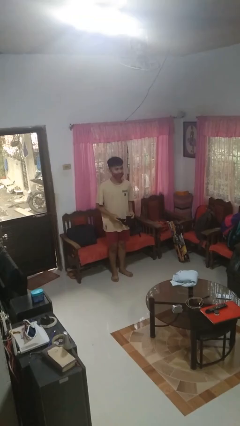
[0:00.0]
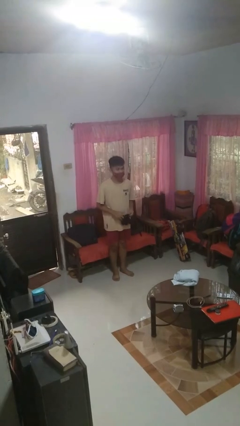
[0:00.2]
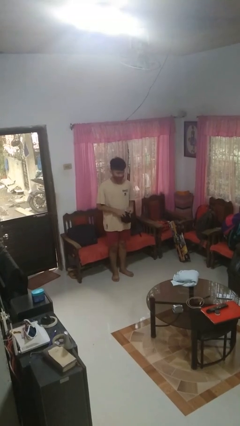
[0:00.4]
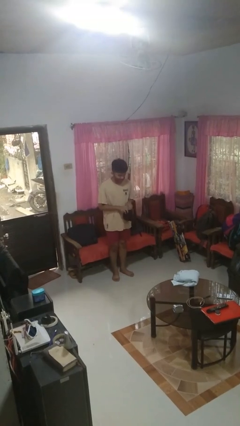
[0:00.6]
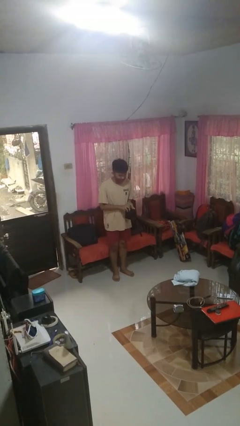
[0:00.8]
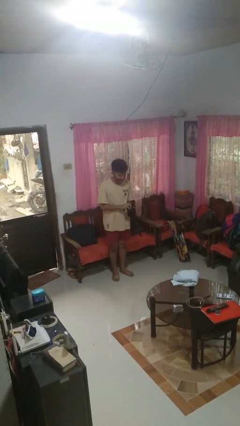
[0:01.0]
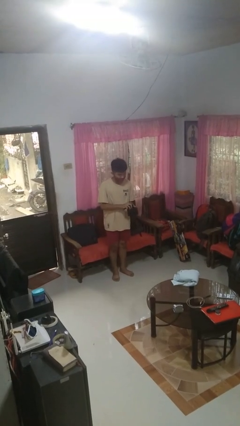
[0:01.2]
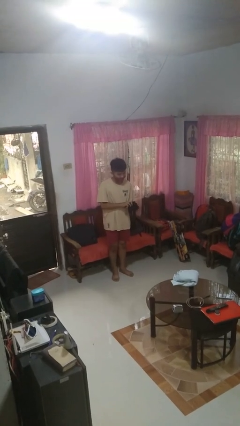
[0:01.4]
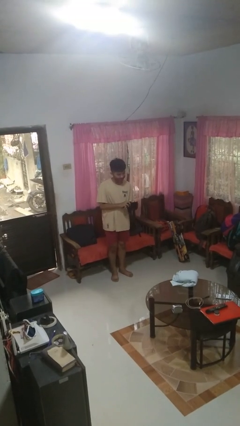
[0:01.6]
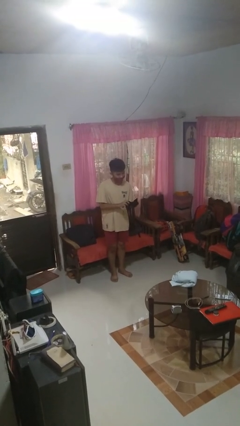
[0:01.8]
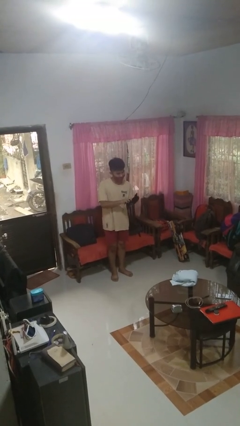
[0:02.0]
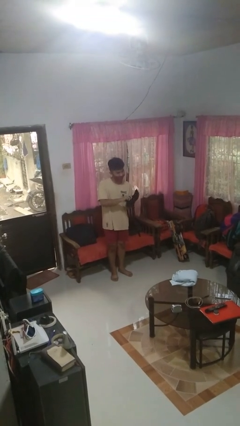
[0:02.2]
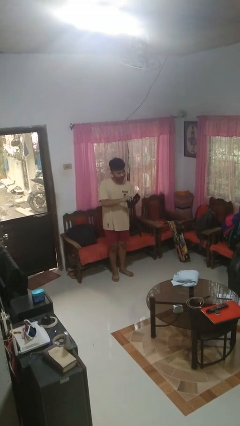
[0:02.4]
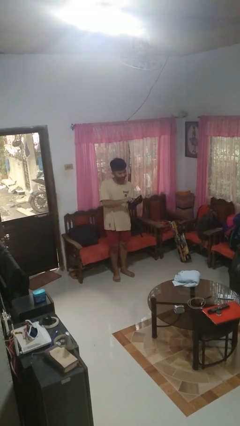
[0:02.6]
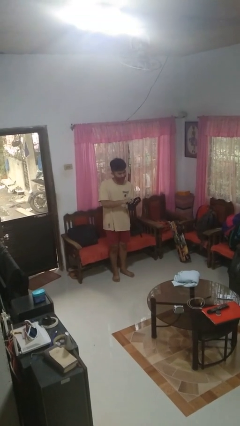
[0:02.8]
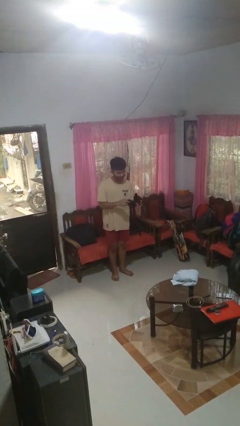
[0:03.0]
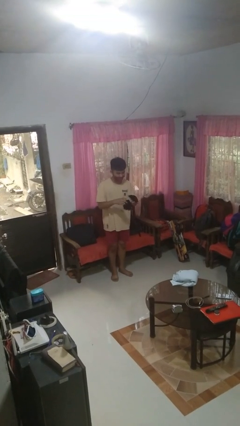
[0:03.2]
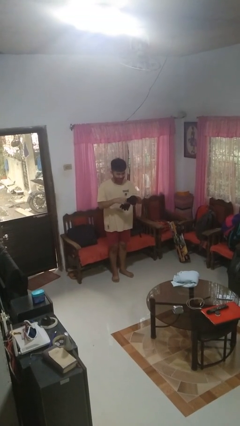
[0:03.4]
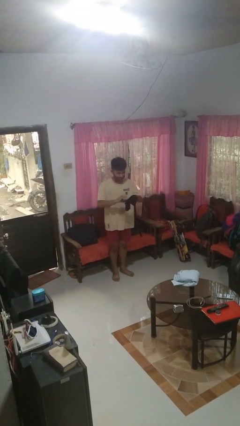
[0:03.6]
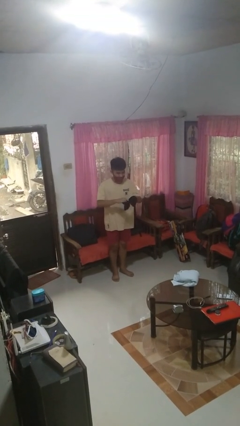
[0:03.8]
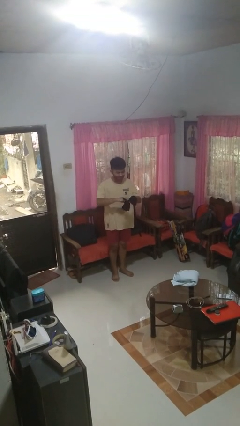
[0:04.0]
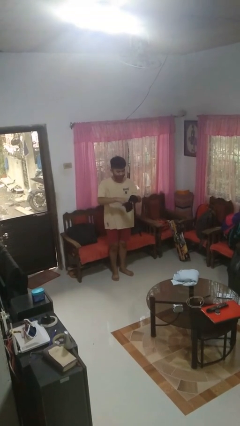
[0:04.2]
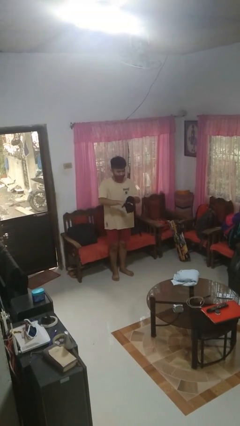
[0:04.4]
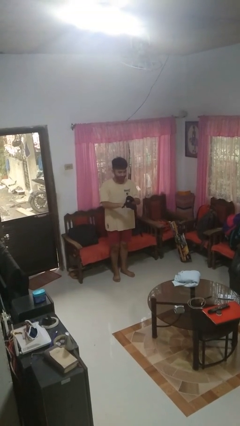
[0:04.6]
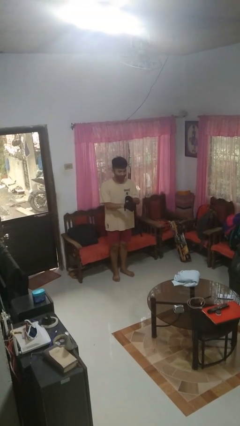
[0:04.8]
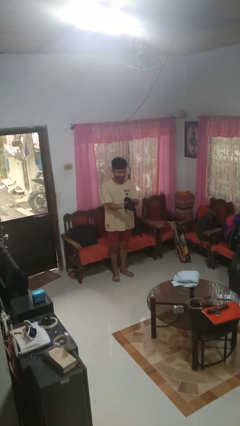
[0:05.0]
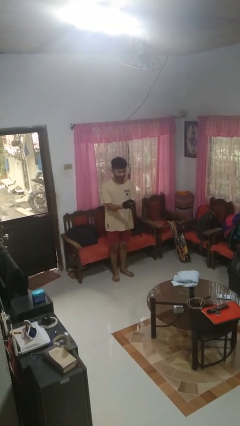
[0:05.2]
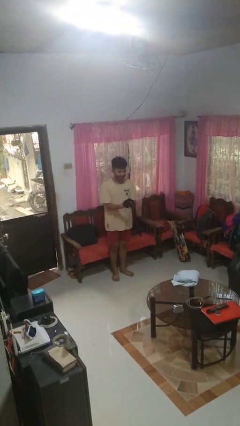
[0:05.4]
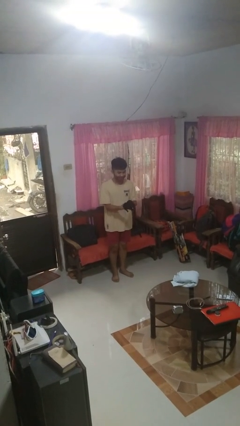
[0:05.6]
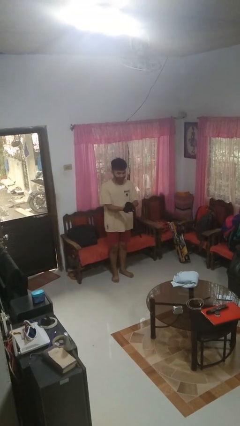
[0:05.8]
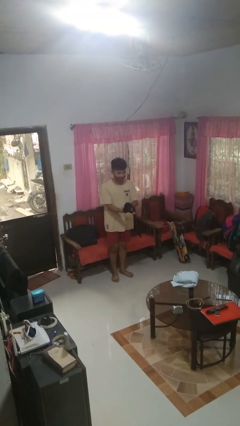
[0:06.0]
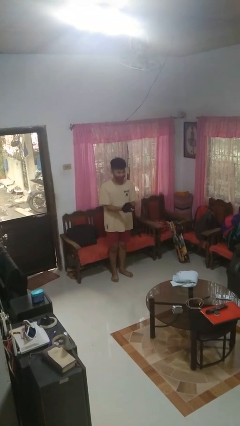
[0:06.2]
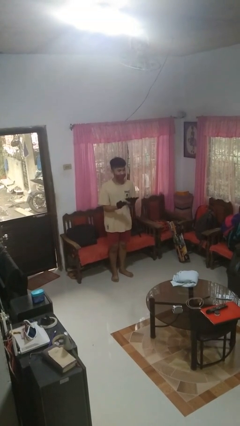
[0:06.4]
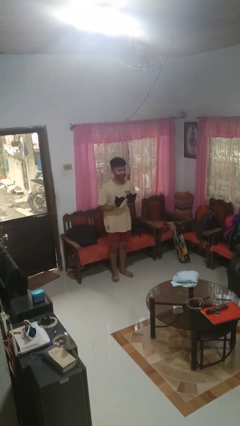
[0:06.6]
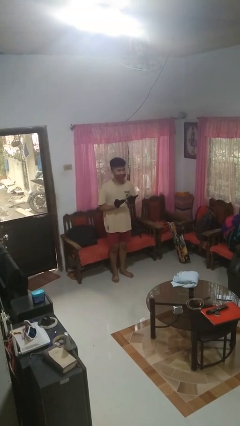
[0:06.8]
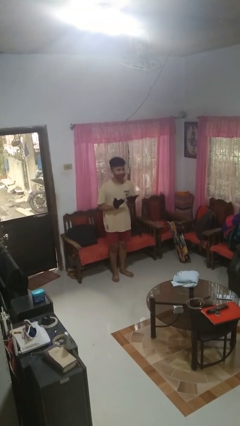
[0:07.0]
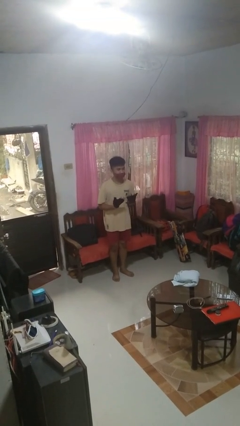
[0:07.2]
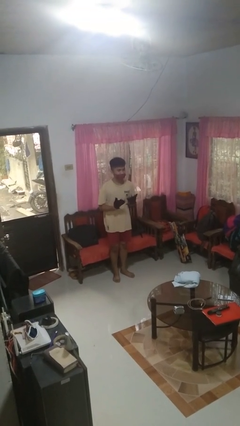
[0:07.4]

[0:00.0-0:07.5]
person puts on gloves

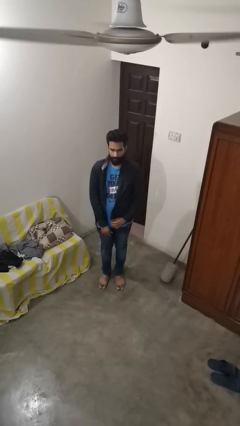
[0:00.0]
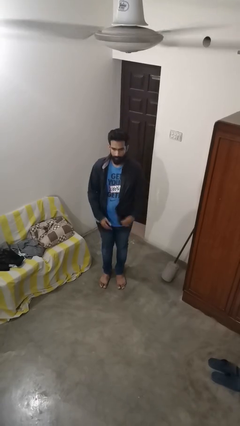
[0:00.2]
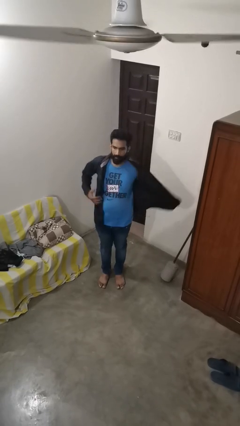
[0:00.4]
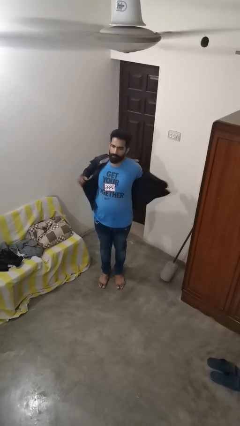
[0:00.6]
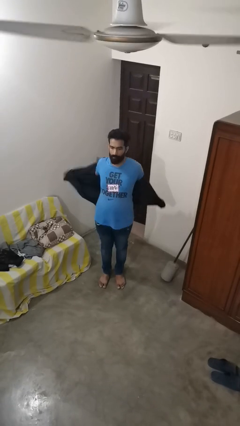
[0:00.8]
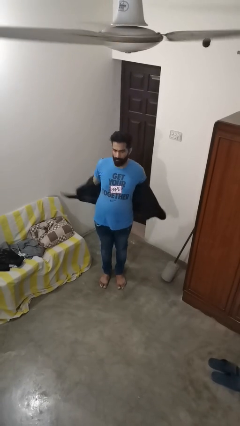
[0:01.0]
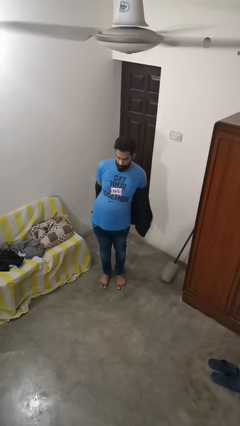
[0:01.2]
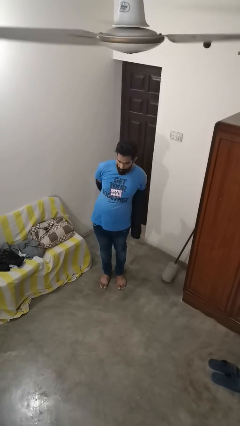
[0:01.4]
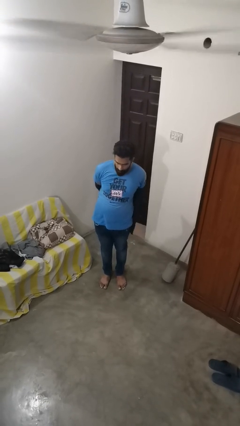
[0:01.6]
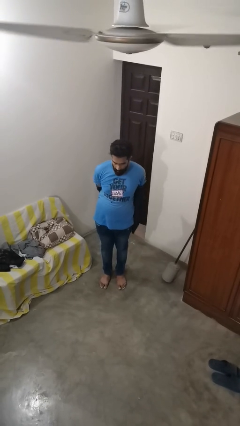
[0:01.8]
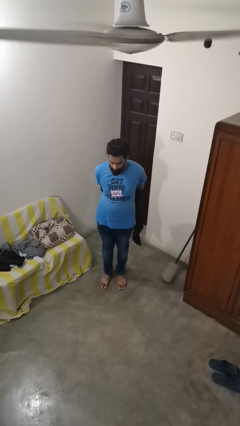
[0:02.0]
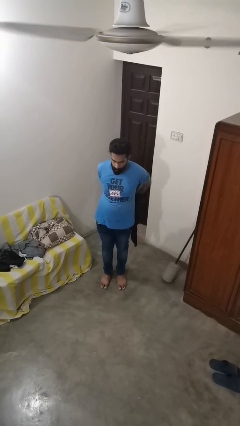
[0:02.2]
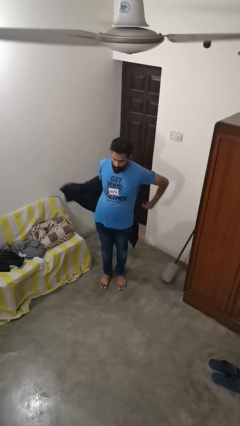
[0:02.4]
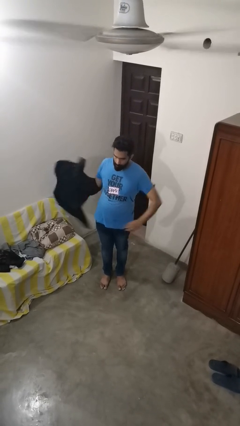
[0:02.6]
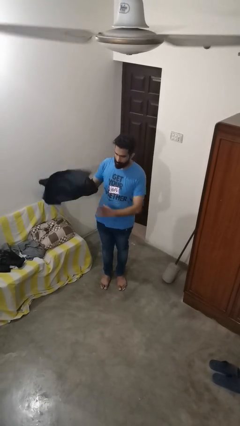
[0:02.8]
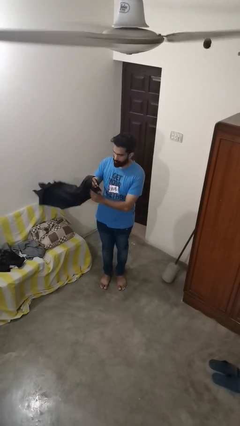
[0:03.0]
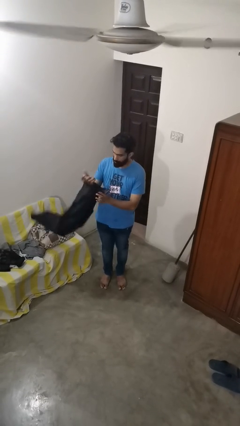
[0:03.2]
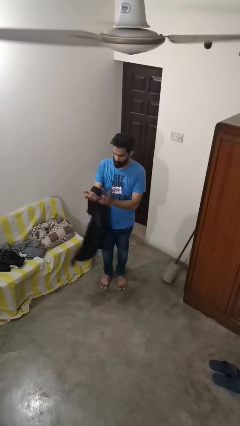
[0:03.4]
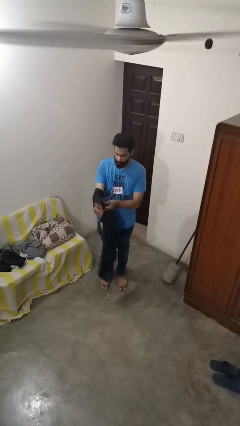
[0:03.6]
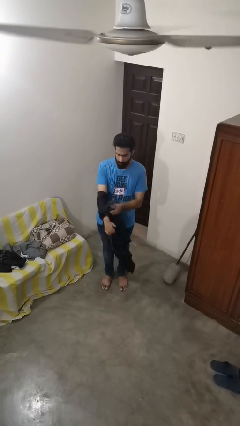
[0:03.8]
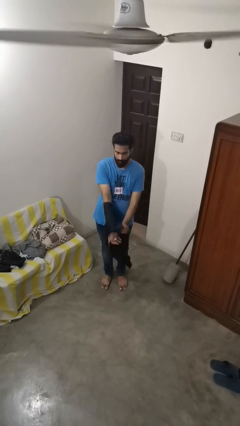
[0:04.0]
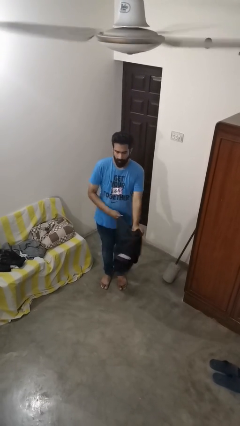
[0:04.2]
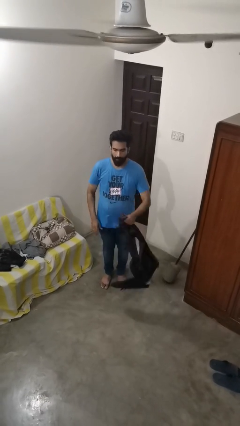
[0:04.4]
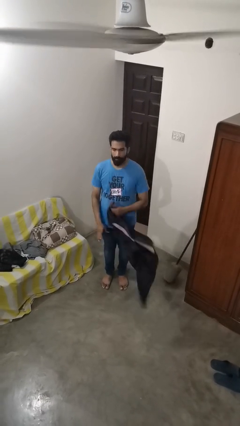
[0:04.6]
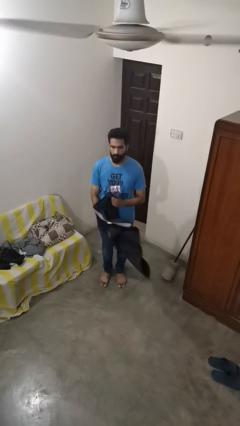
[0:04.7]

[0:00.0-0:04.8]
person takes off shirt

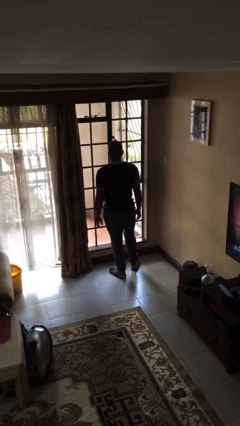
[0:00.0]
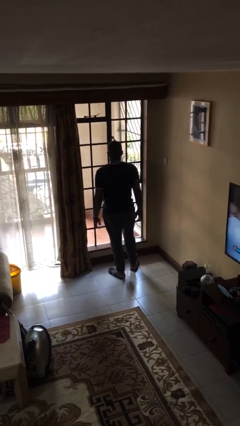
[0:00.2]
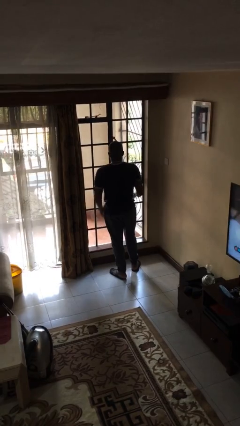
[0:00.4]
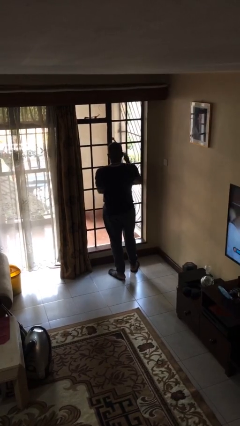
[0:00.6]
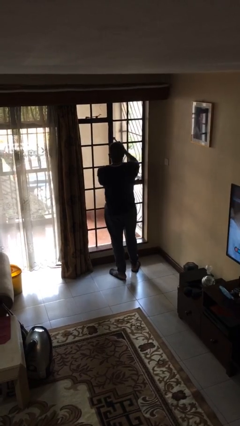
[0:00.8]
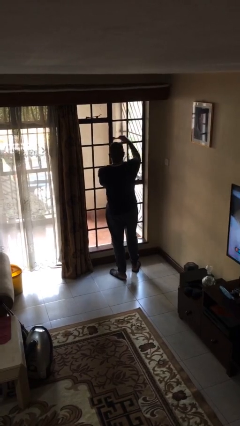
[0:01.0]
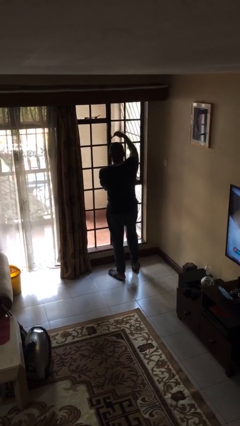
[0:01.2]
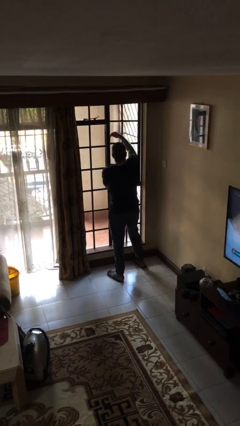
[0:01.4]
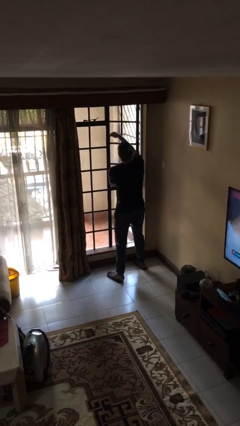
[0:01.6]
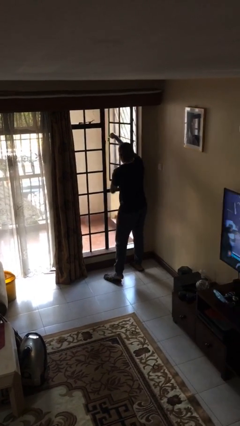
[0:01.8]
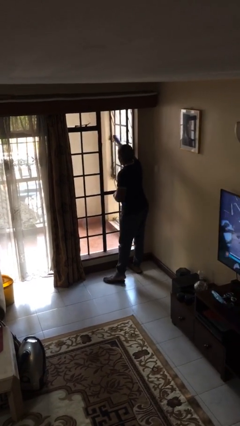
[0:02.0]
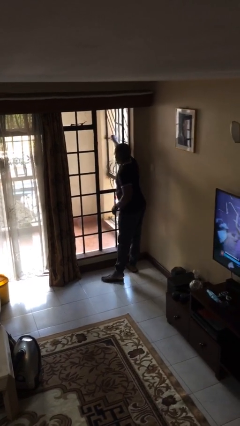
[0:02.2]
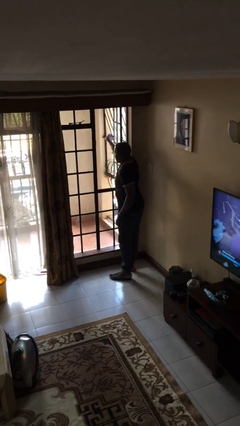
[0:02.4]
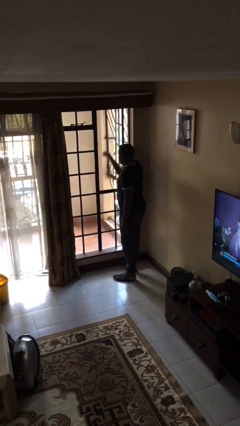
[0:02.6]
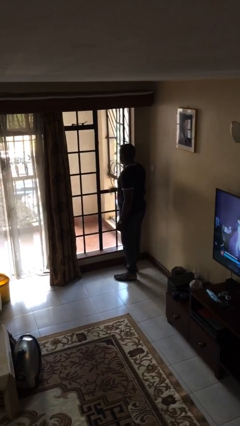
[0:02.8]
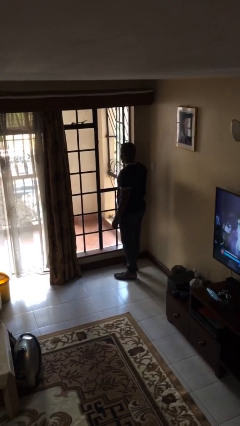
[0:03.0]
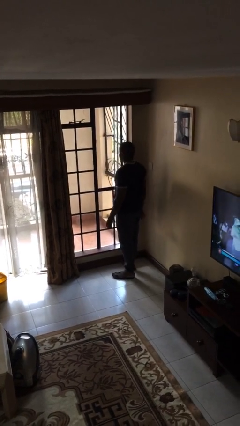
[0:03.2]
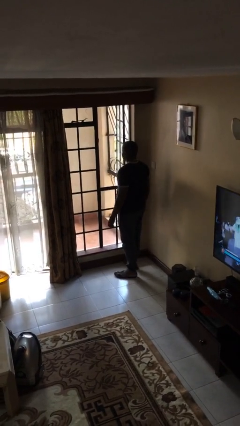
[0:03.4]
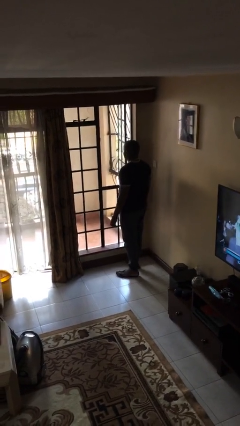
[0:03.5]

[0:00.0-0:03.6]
person opens home window

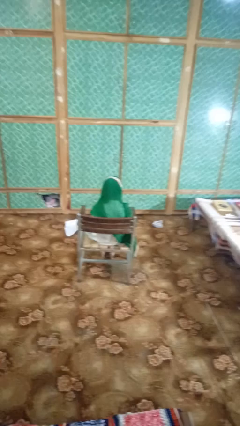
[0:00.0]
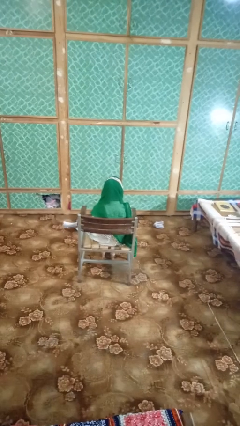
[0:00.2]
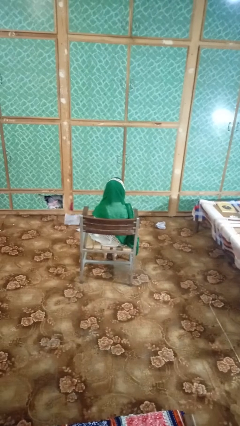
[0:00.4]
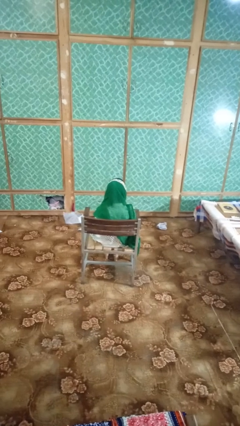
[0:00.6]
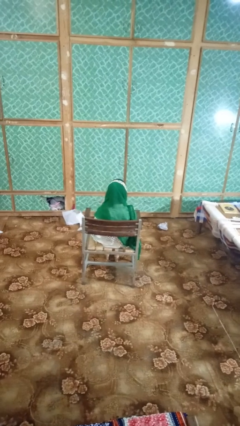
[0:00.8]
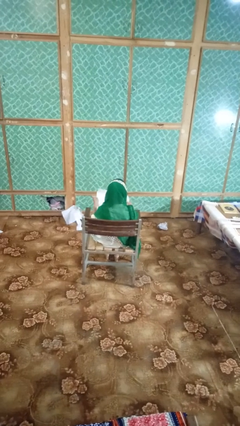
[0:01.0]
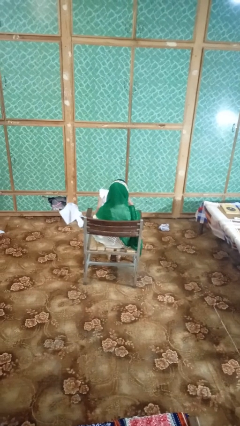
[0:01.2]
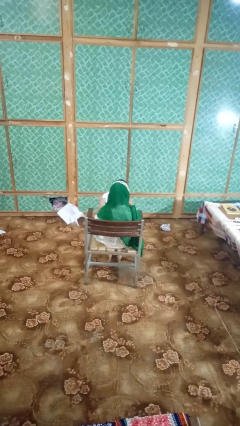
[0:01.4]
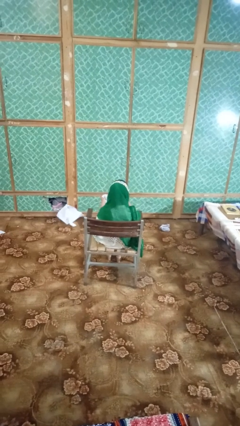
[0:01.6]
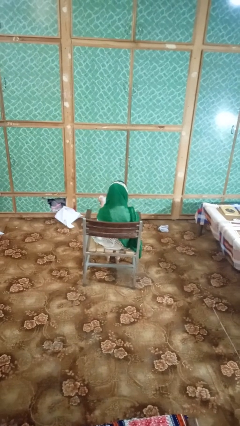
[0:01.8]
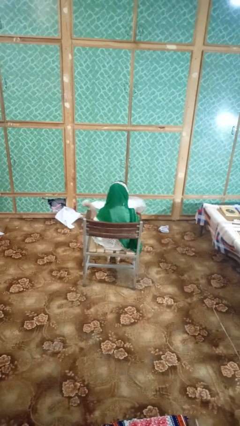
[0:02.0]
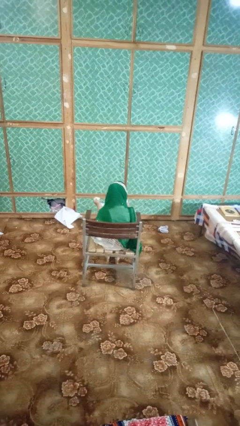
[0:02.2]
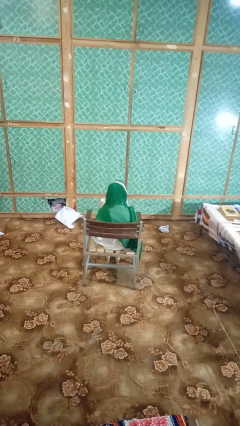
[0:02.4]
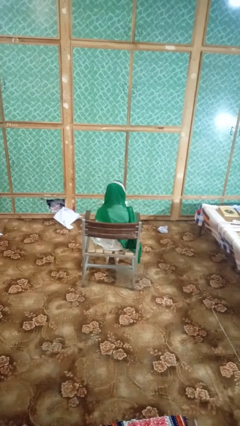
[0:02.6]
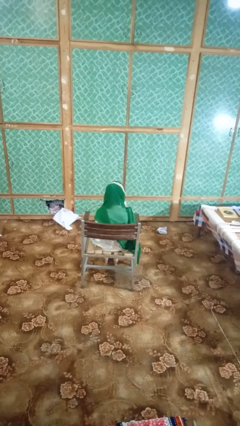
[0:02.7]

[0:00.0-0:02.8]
person tears paper
